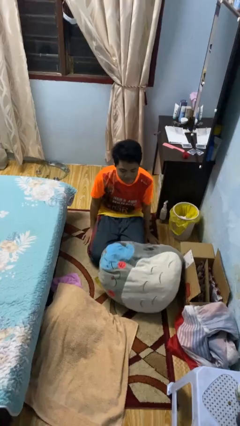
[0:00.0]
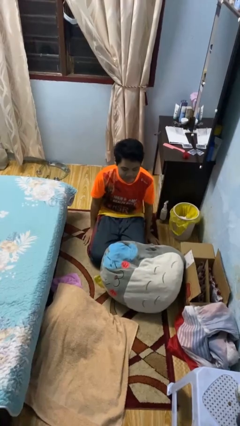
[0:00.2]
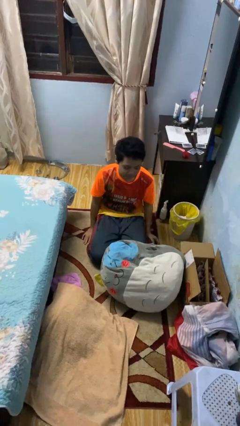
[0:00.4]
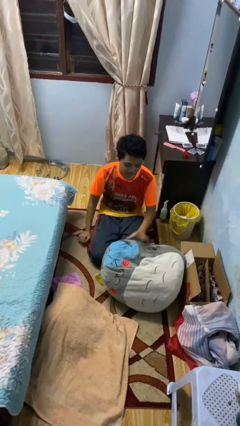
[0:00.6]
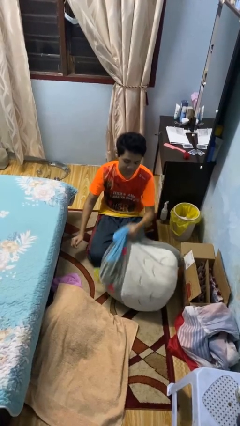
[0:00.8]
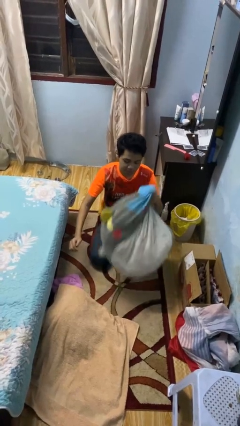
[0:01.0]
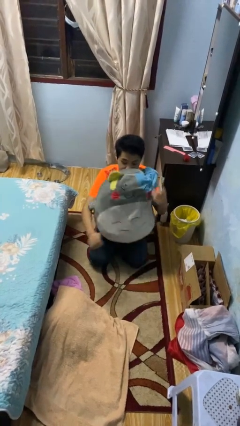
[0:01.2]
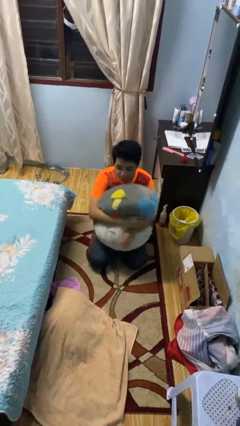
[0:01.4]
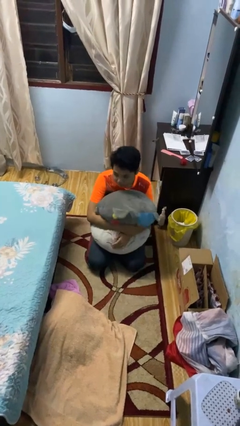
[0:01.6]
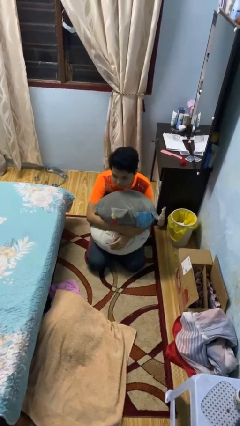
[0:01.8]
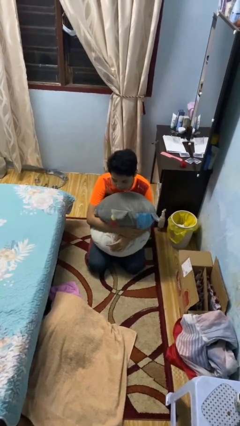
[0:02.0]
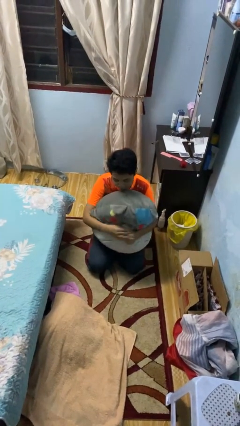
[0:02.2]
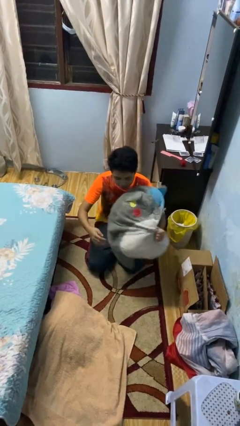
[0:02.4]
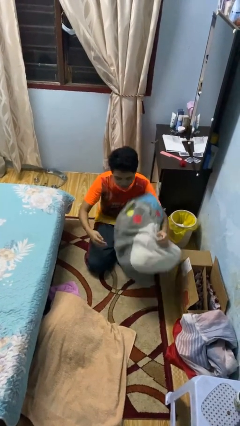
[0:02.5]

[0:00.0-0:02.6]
person hugs stuffed animal

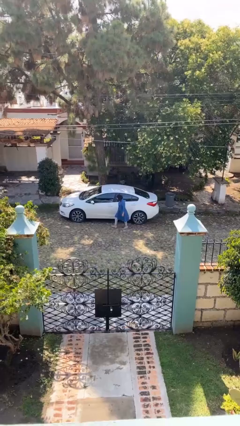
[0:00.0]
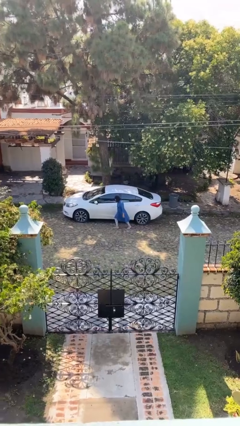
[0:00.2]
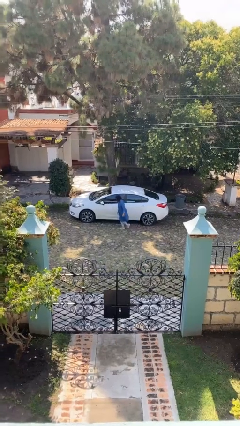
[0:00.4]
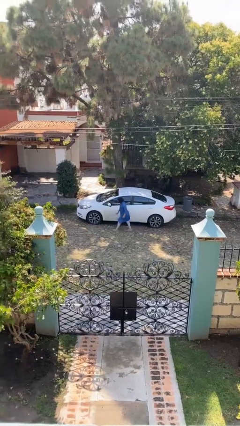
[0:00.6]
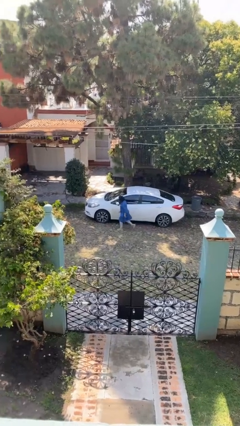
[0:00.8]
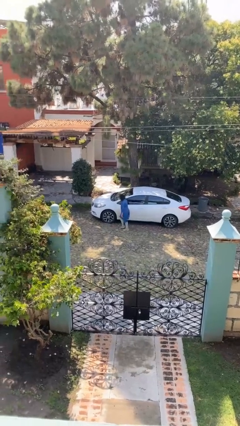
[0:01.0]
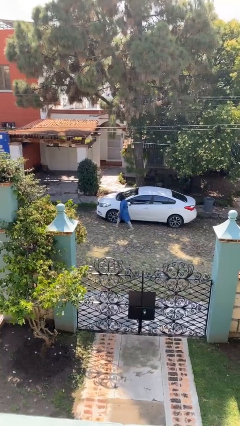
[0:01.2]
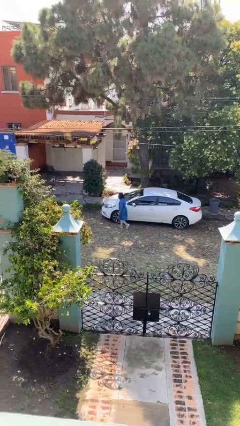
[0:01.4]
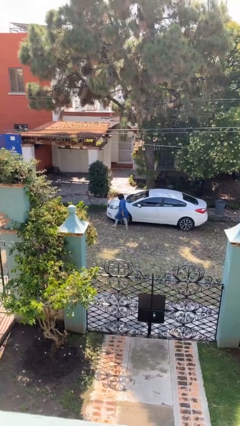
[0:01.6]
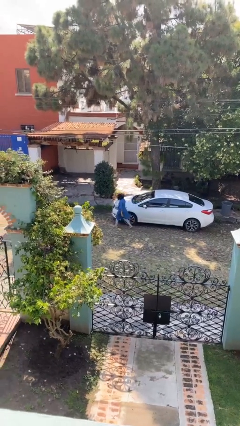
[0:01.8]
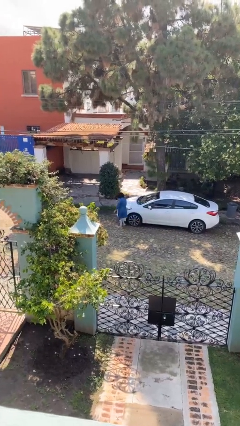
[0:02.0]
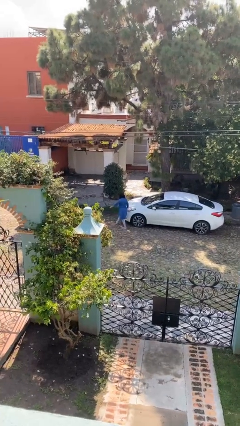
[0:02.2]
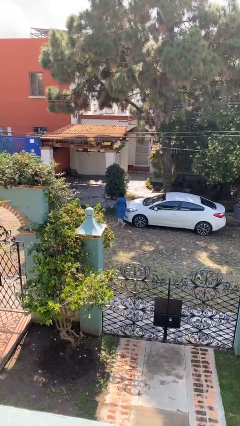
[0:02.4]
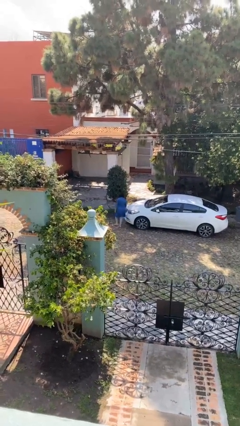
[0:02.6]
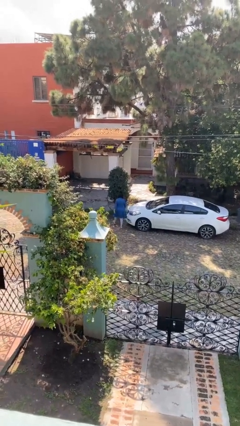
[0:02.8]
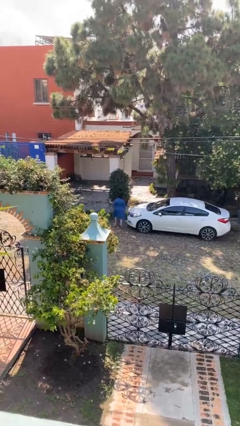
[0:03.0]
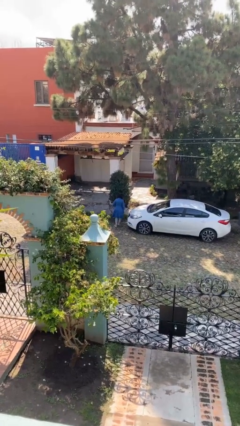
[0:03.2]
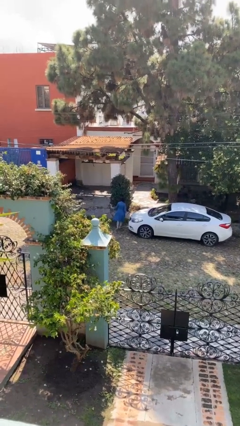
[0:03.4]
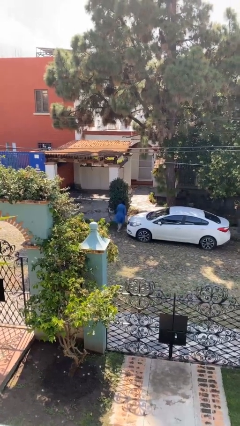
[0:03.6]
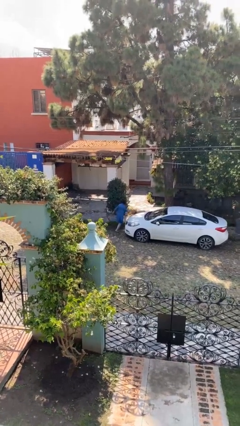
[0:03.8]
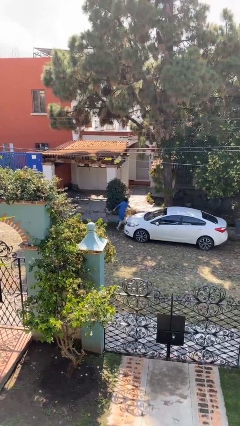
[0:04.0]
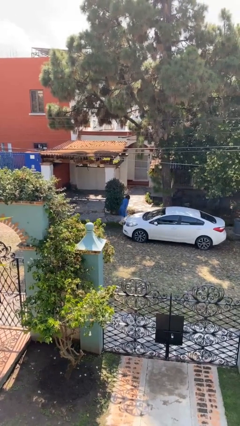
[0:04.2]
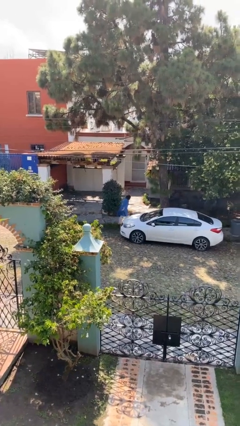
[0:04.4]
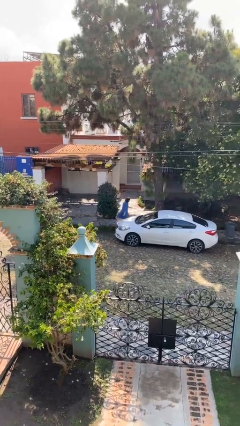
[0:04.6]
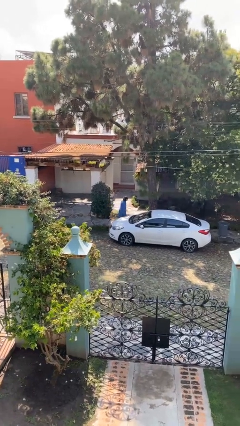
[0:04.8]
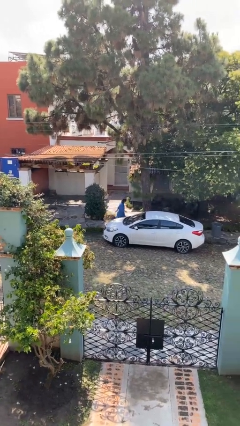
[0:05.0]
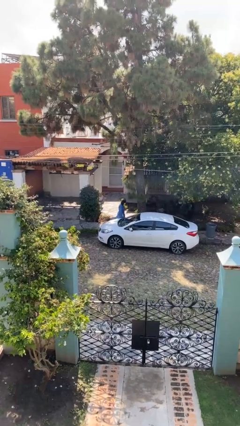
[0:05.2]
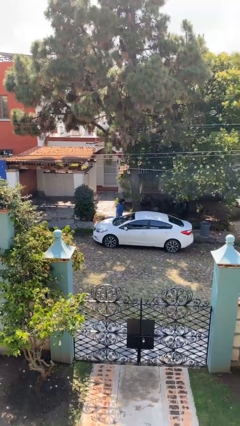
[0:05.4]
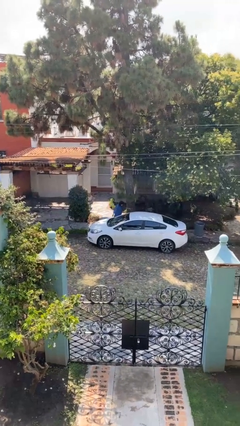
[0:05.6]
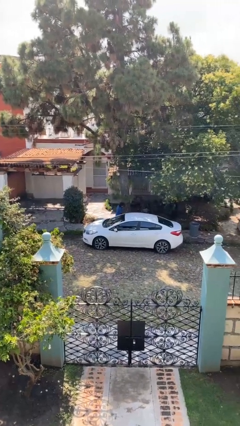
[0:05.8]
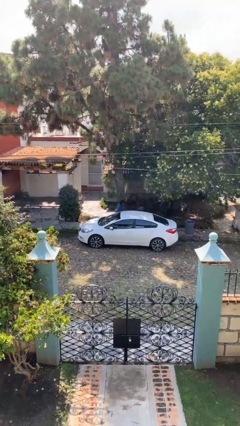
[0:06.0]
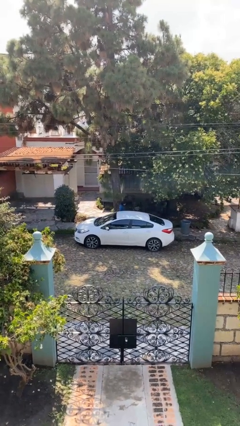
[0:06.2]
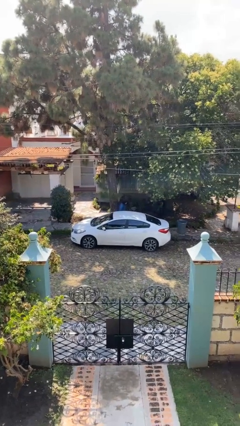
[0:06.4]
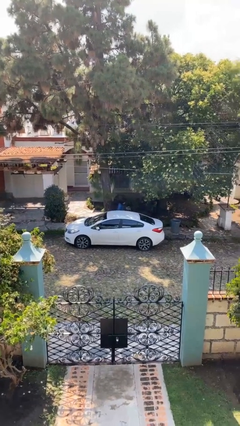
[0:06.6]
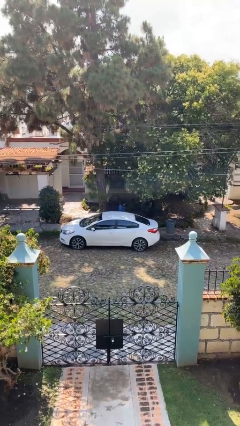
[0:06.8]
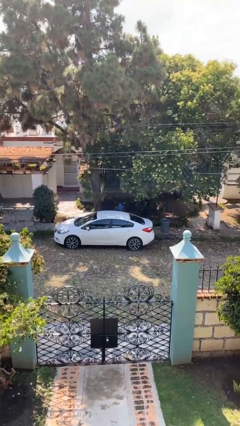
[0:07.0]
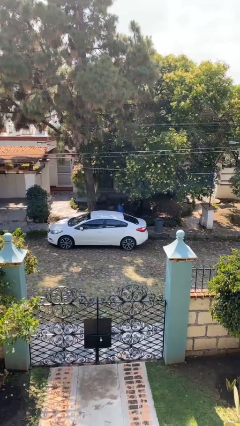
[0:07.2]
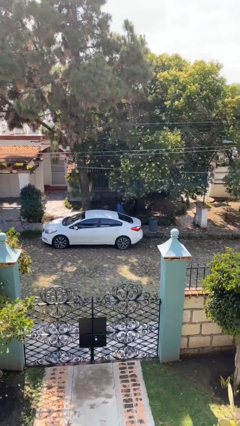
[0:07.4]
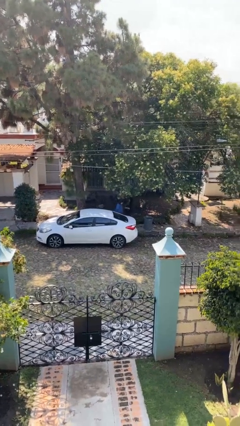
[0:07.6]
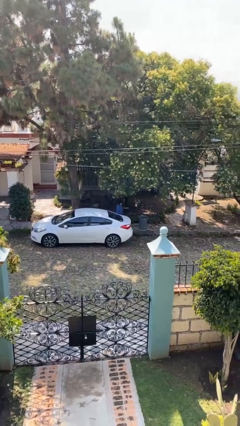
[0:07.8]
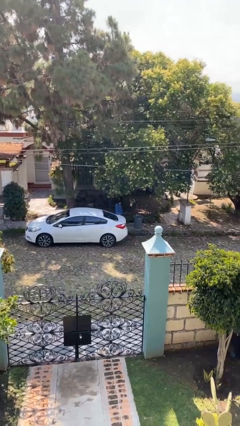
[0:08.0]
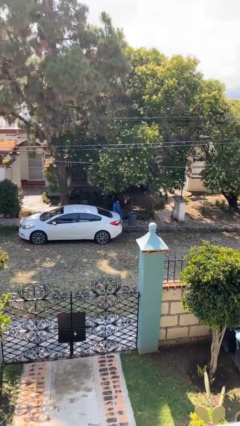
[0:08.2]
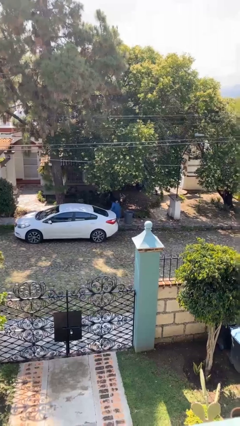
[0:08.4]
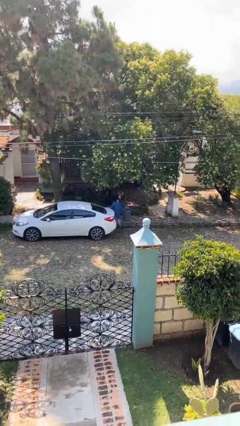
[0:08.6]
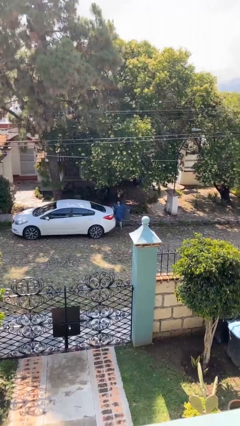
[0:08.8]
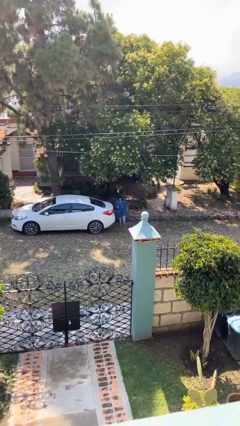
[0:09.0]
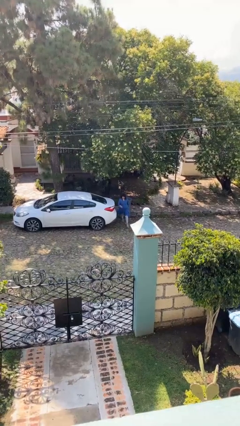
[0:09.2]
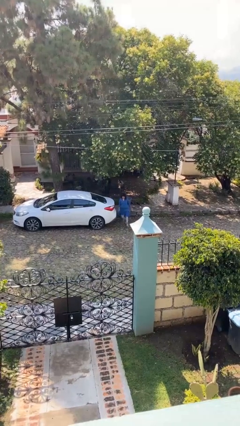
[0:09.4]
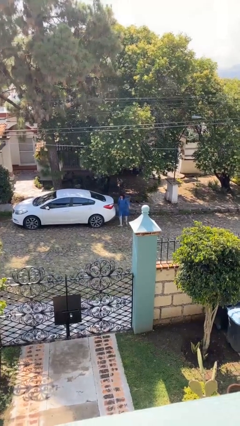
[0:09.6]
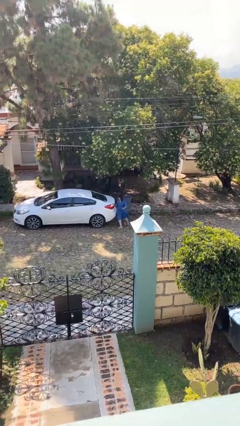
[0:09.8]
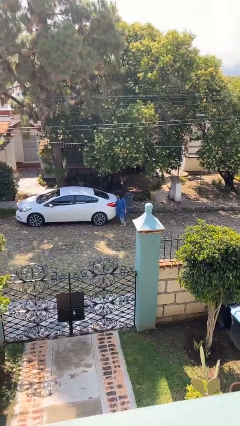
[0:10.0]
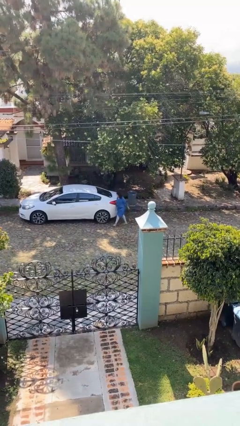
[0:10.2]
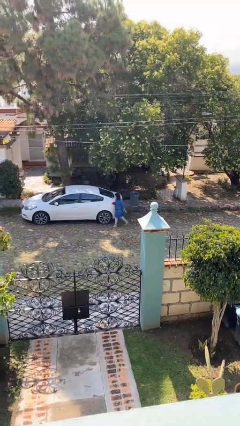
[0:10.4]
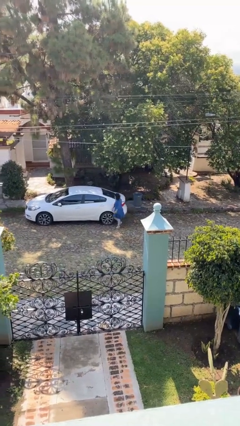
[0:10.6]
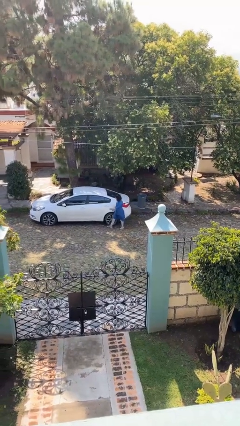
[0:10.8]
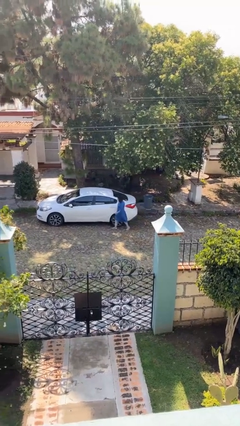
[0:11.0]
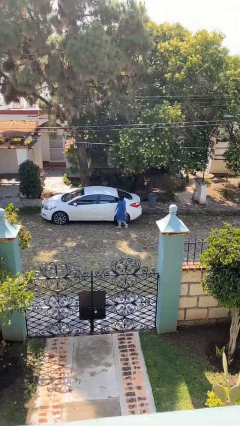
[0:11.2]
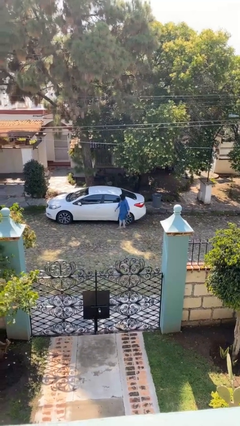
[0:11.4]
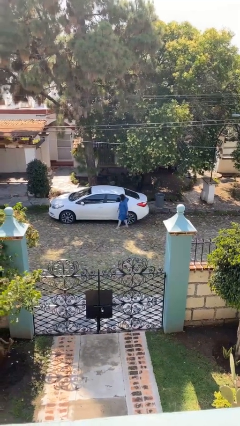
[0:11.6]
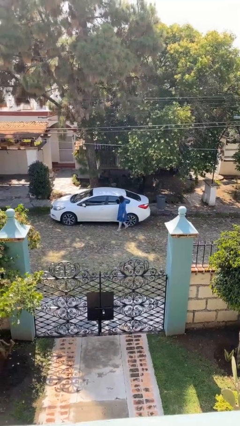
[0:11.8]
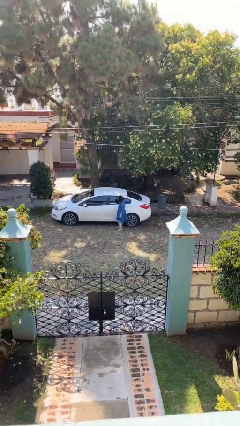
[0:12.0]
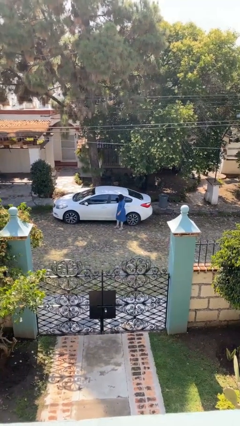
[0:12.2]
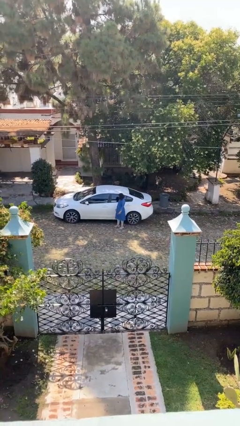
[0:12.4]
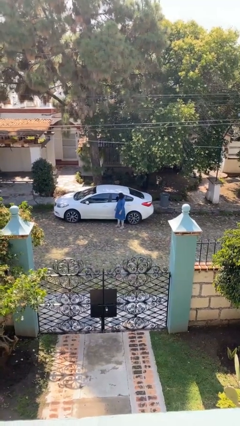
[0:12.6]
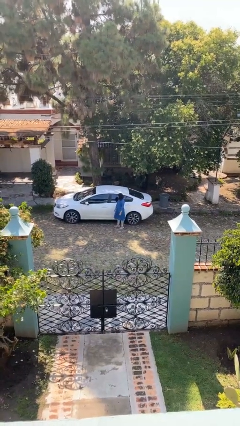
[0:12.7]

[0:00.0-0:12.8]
person walks around car

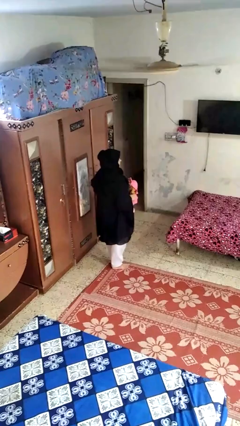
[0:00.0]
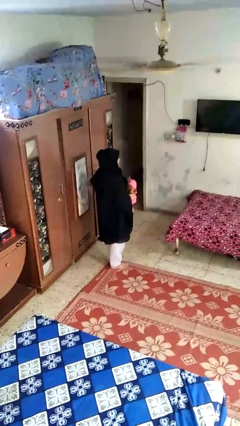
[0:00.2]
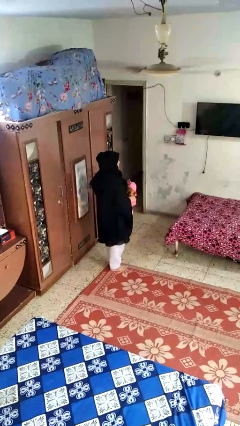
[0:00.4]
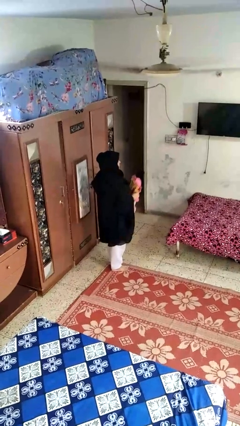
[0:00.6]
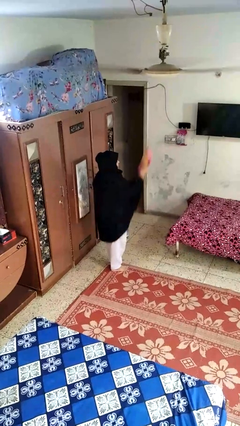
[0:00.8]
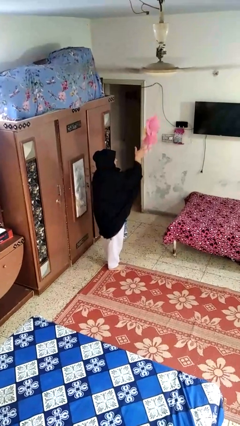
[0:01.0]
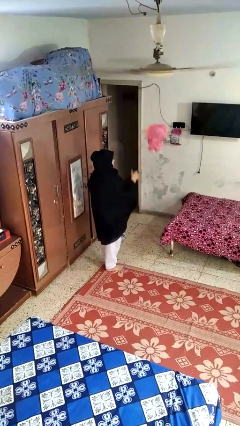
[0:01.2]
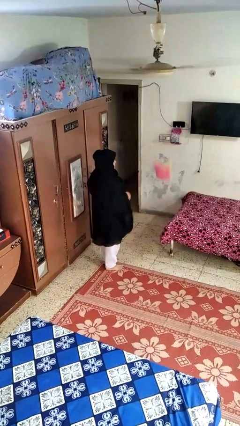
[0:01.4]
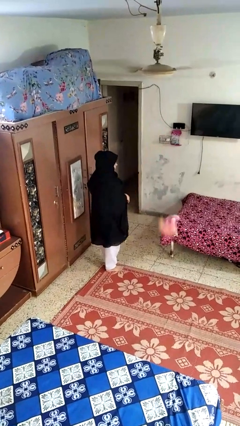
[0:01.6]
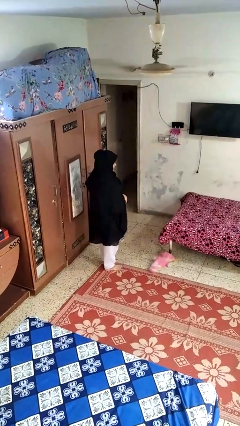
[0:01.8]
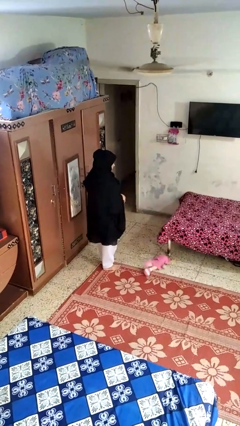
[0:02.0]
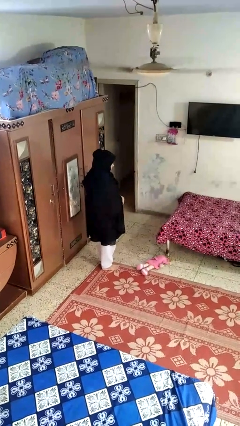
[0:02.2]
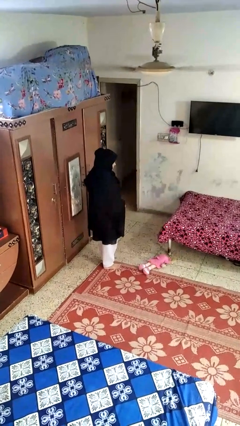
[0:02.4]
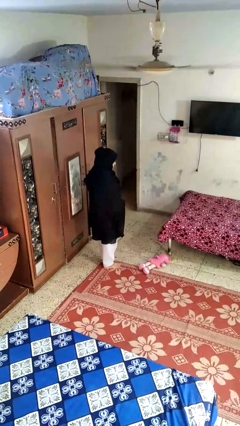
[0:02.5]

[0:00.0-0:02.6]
person throws object into air

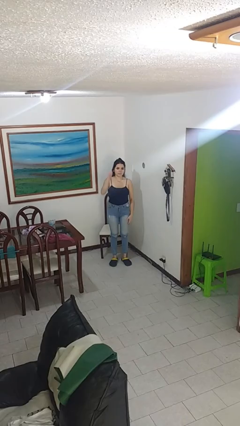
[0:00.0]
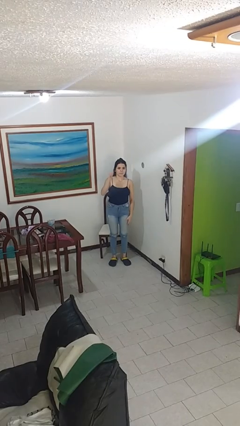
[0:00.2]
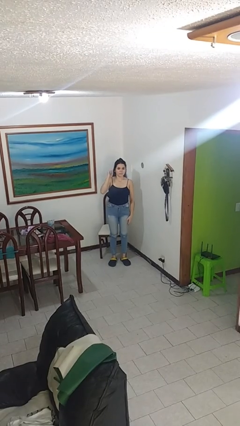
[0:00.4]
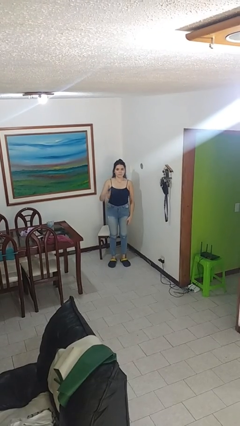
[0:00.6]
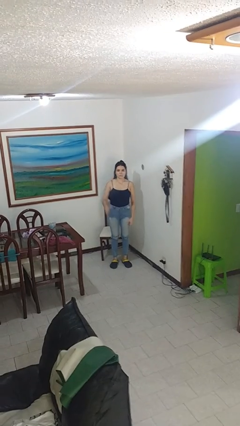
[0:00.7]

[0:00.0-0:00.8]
person gestures behind me
